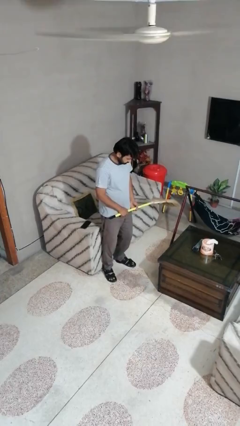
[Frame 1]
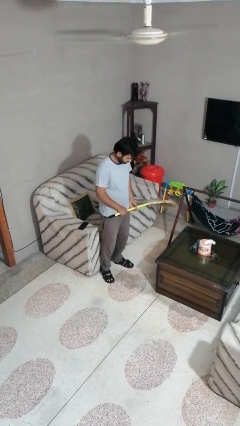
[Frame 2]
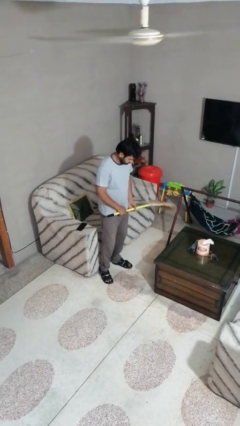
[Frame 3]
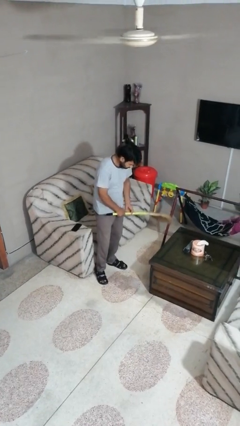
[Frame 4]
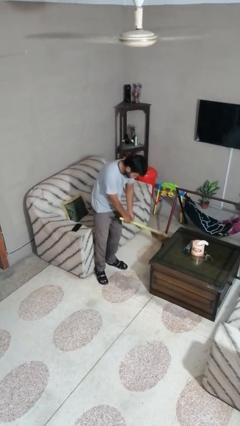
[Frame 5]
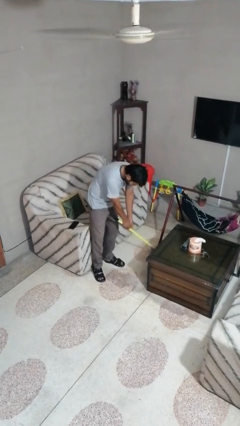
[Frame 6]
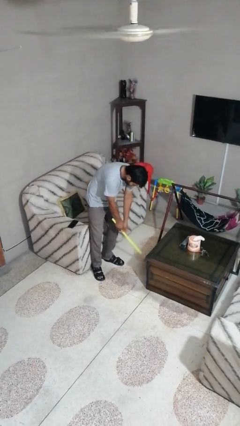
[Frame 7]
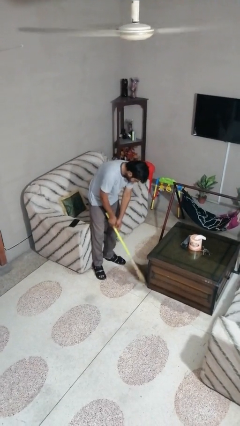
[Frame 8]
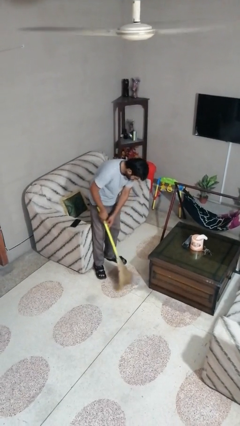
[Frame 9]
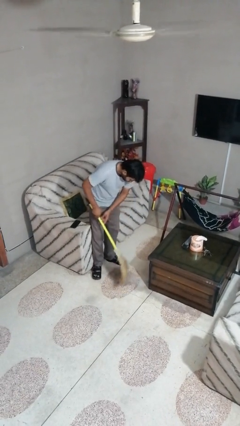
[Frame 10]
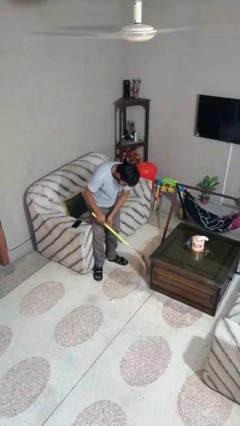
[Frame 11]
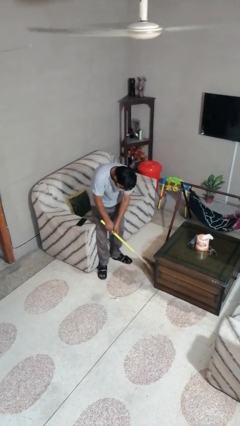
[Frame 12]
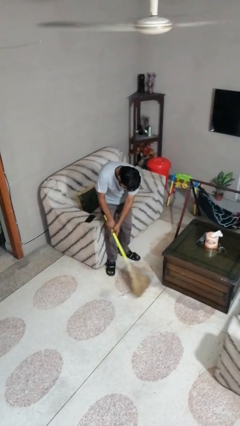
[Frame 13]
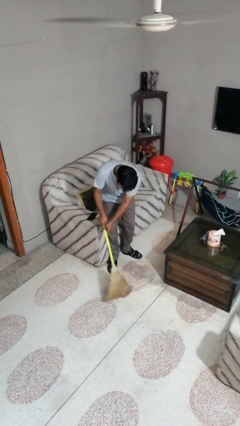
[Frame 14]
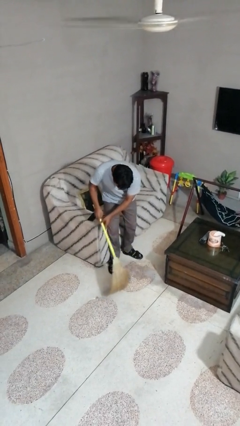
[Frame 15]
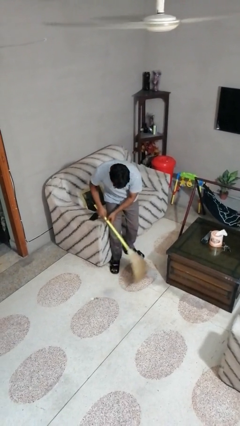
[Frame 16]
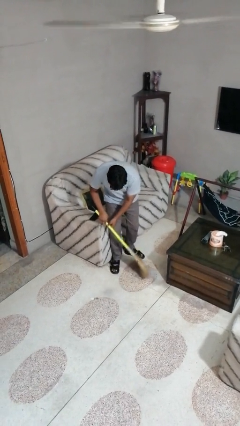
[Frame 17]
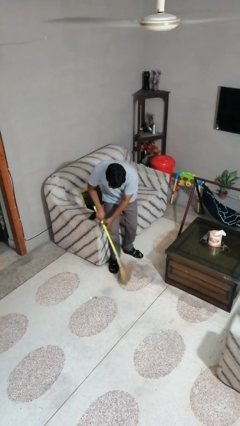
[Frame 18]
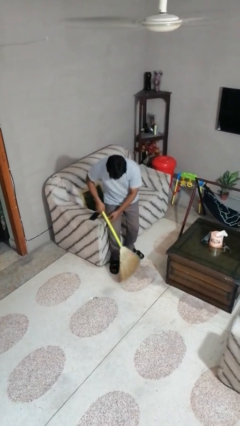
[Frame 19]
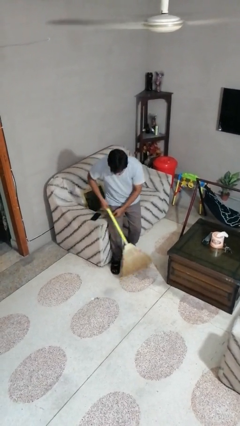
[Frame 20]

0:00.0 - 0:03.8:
person sweeps floor

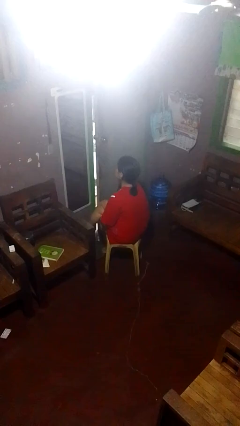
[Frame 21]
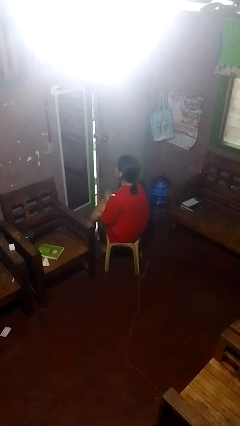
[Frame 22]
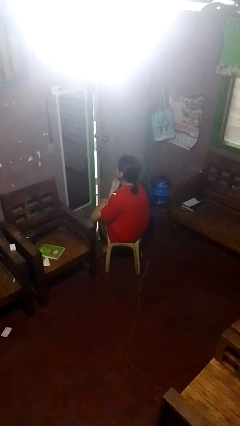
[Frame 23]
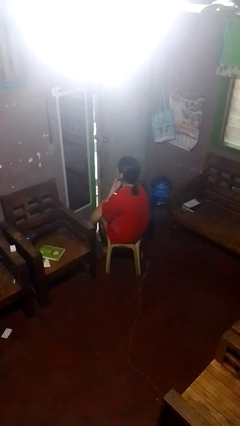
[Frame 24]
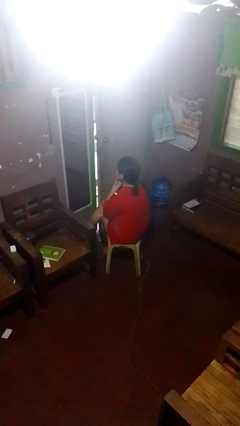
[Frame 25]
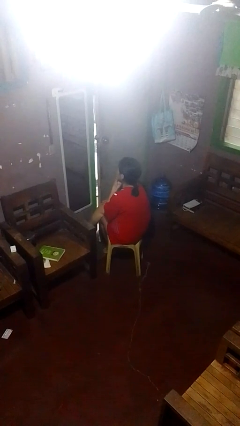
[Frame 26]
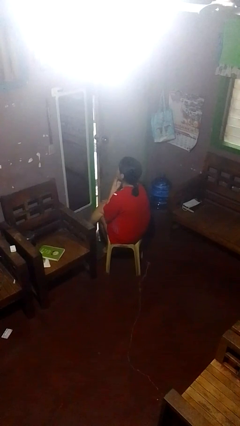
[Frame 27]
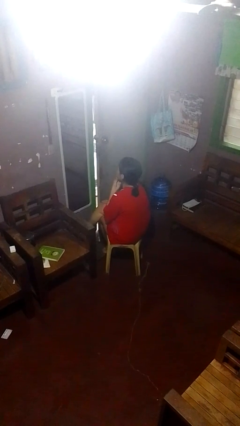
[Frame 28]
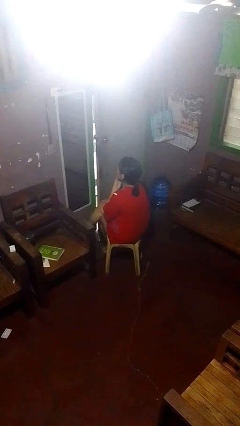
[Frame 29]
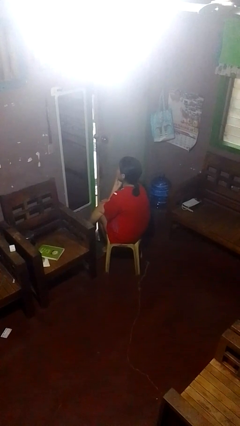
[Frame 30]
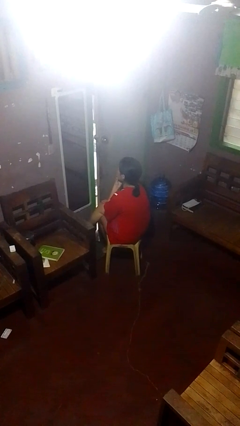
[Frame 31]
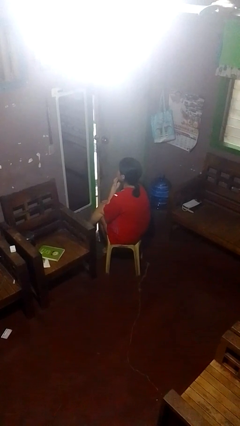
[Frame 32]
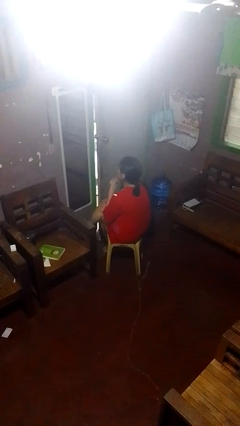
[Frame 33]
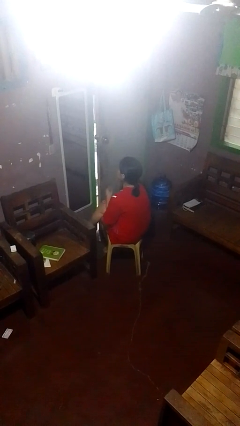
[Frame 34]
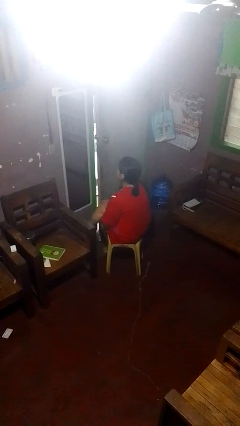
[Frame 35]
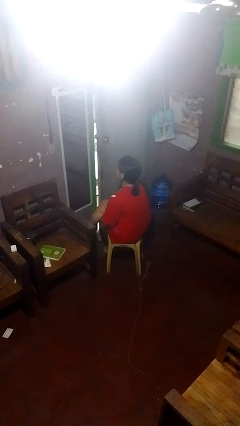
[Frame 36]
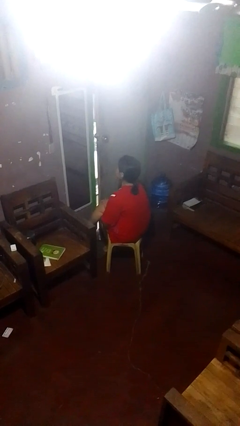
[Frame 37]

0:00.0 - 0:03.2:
person strokes chin

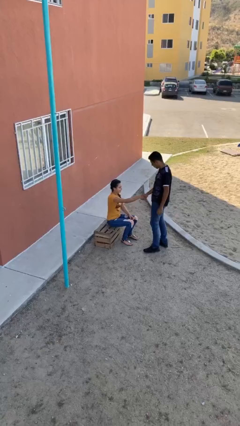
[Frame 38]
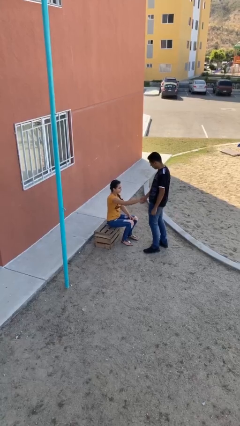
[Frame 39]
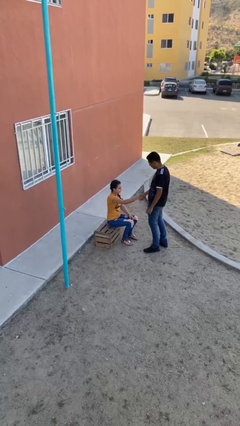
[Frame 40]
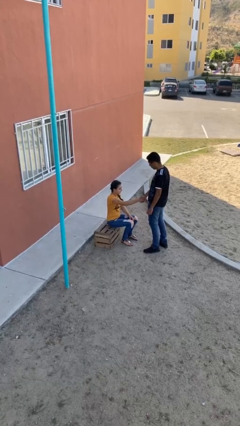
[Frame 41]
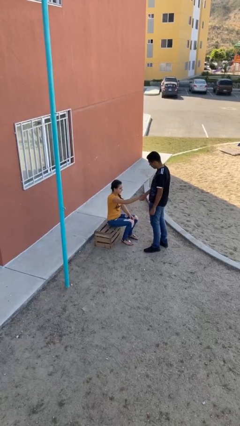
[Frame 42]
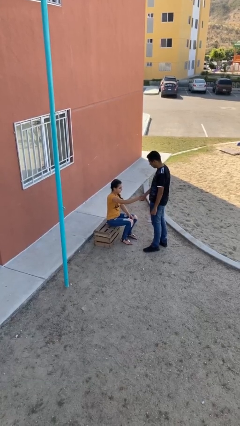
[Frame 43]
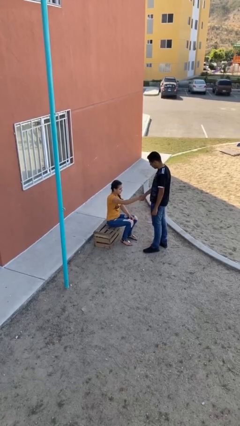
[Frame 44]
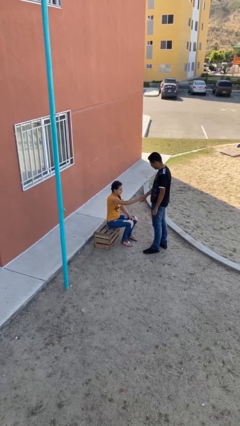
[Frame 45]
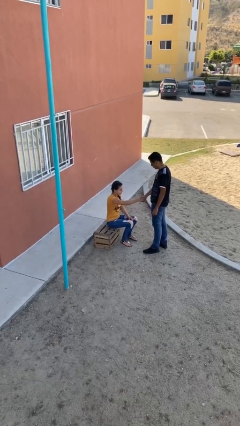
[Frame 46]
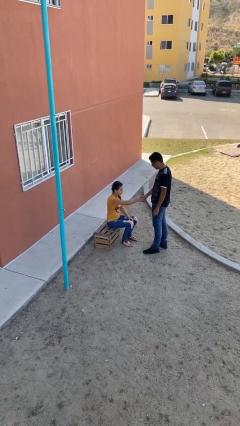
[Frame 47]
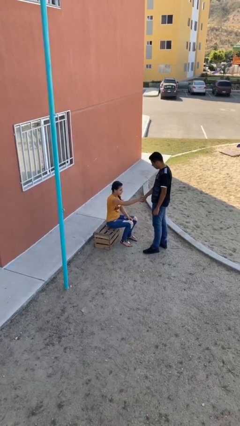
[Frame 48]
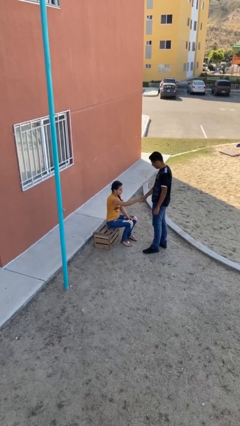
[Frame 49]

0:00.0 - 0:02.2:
person shakes hand

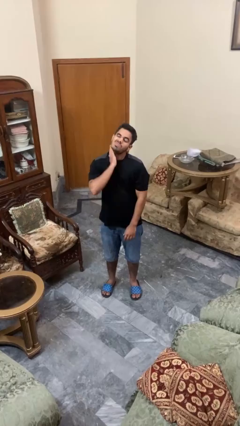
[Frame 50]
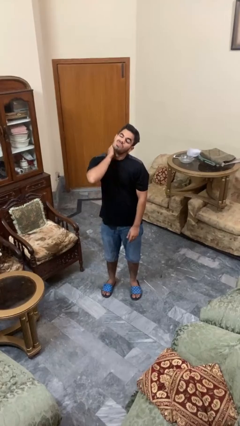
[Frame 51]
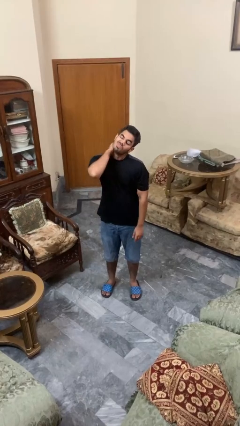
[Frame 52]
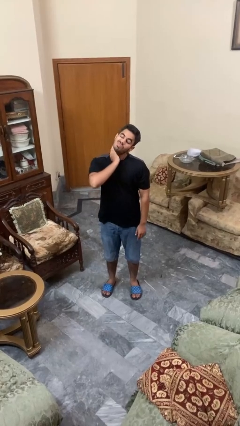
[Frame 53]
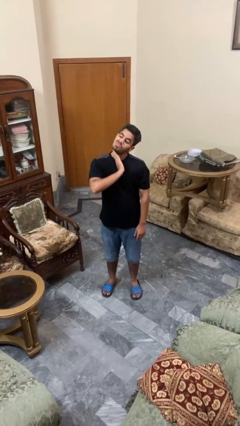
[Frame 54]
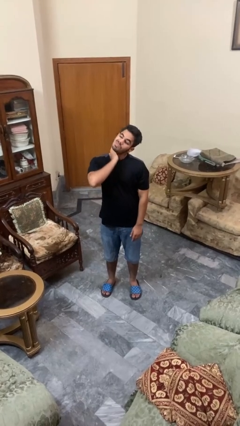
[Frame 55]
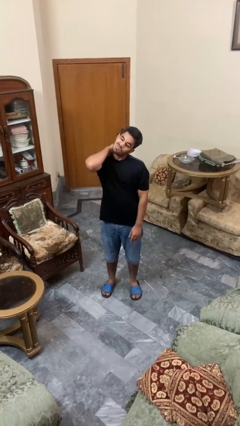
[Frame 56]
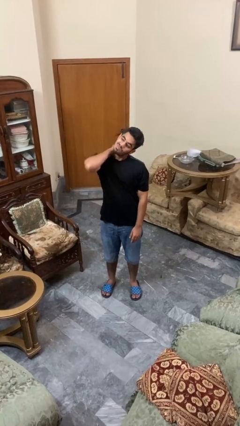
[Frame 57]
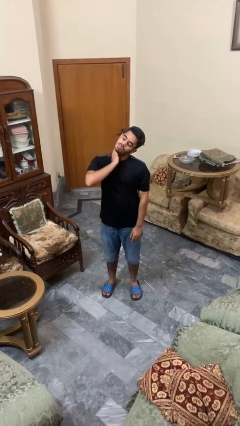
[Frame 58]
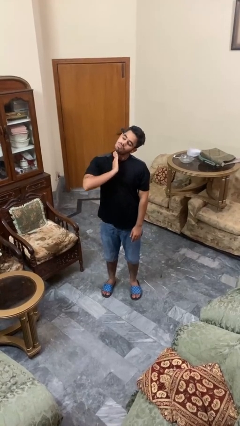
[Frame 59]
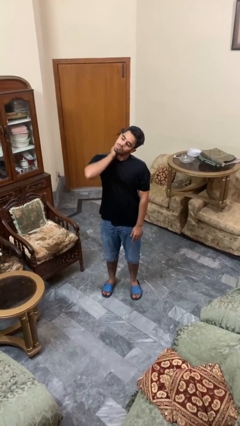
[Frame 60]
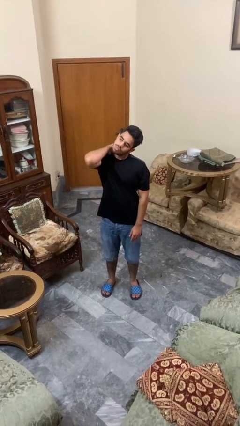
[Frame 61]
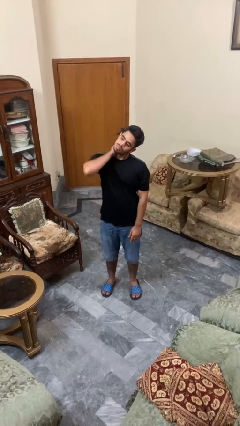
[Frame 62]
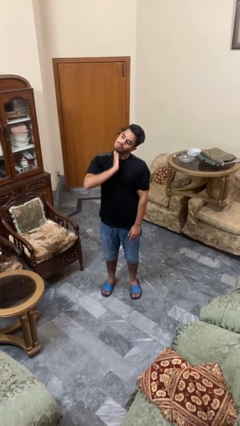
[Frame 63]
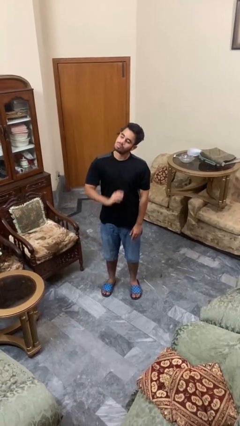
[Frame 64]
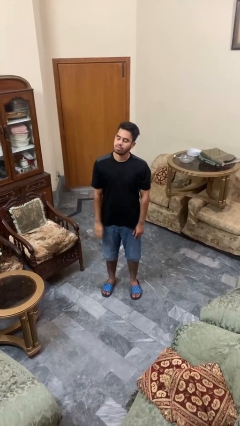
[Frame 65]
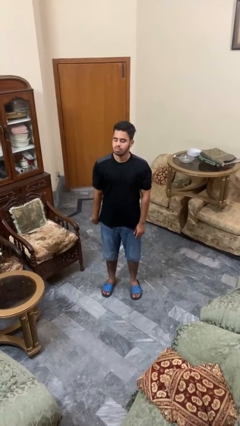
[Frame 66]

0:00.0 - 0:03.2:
person rubs neck

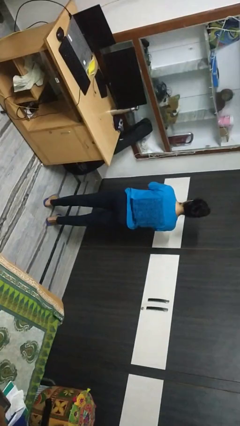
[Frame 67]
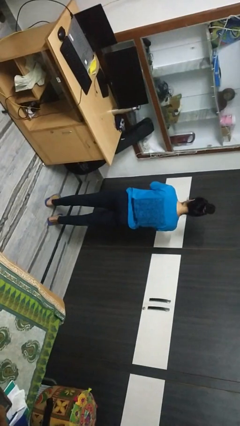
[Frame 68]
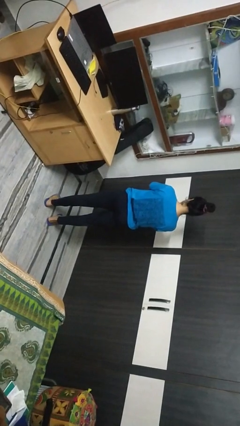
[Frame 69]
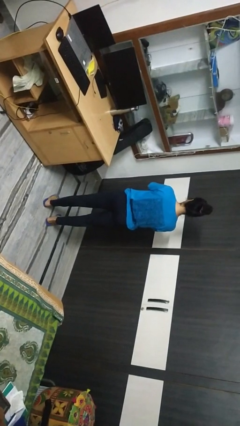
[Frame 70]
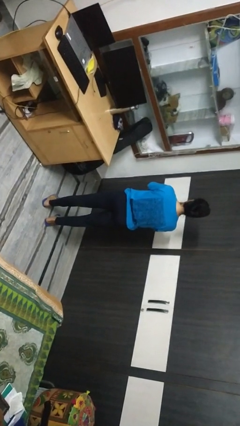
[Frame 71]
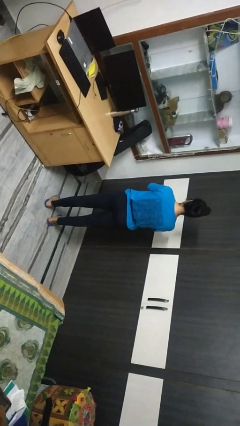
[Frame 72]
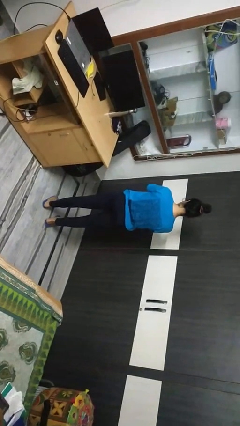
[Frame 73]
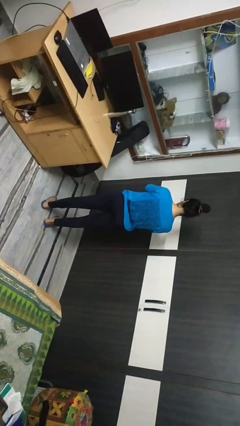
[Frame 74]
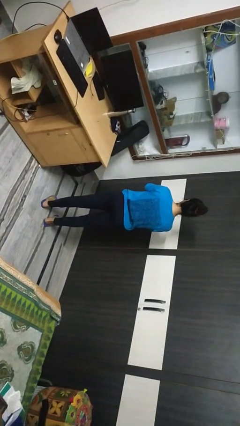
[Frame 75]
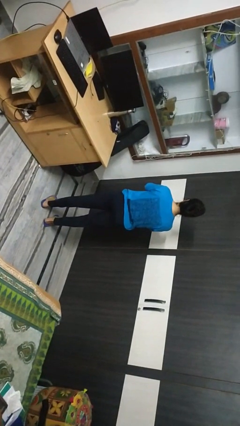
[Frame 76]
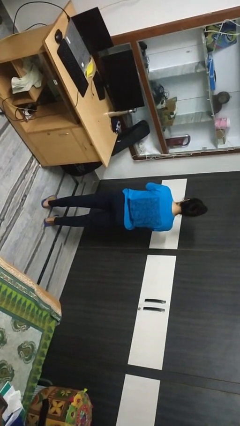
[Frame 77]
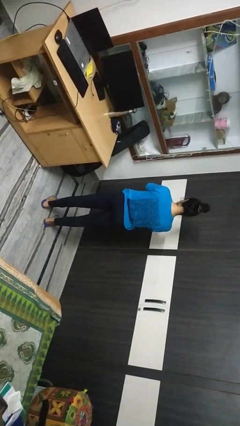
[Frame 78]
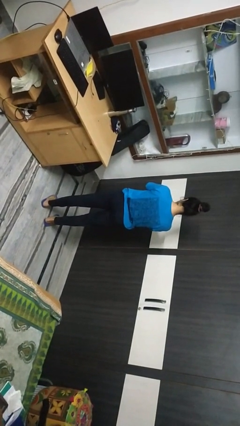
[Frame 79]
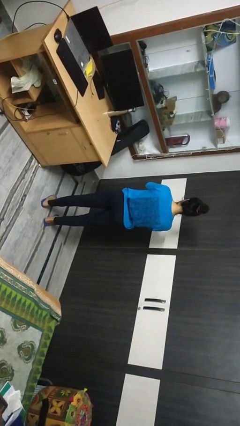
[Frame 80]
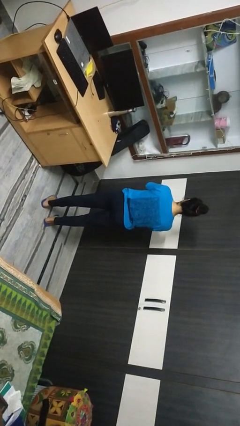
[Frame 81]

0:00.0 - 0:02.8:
person nods head

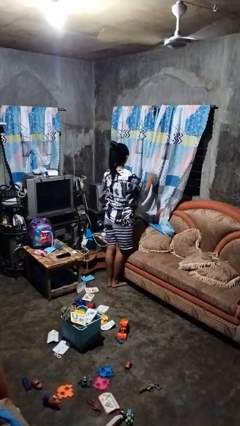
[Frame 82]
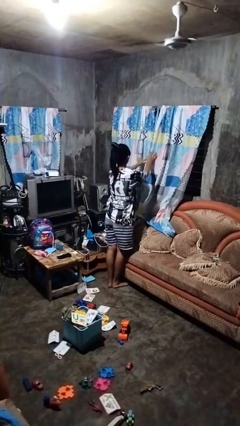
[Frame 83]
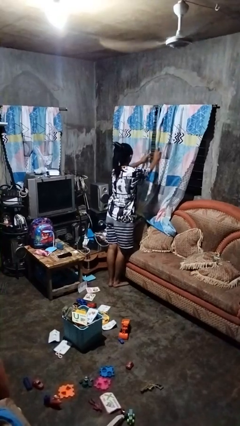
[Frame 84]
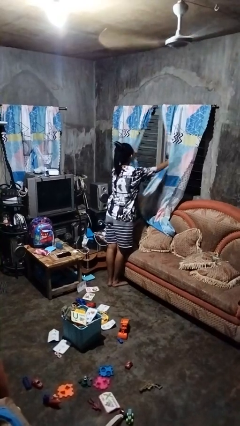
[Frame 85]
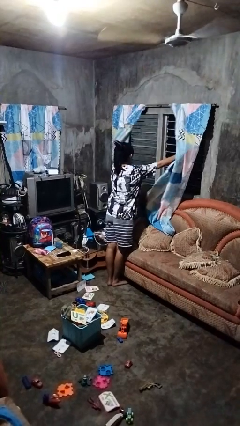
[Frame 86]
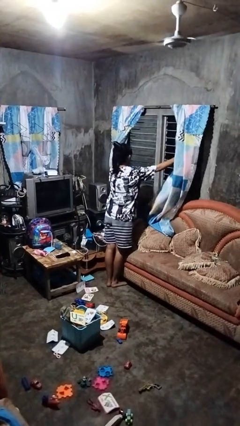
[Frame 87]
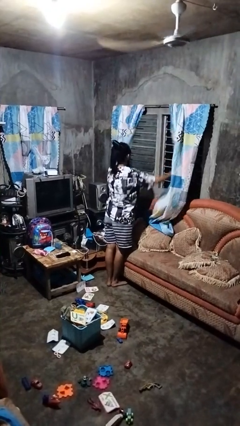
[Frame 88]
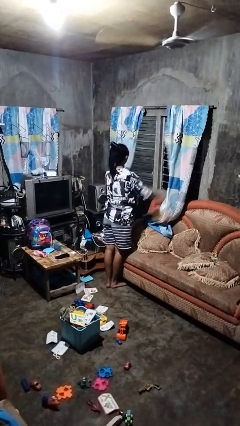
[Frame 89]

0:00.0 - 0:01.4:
person opens curtains

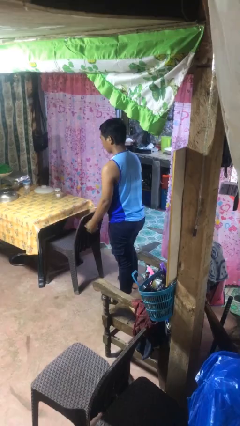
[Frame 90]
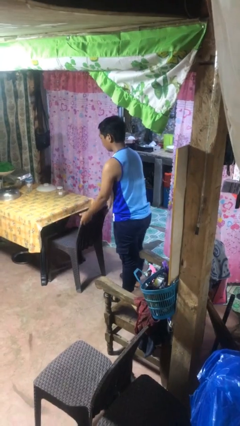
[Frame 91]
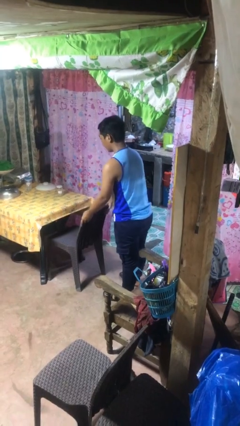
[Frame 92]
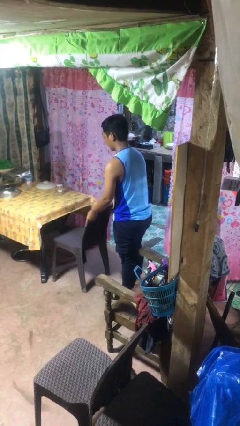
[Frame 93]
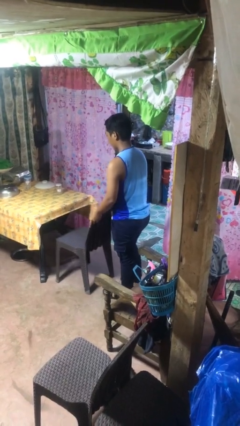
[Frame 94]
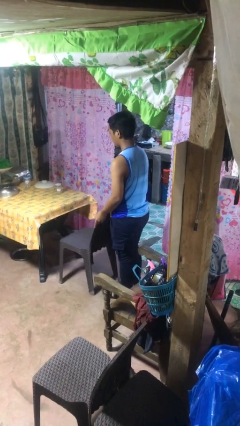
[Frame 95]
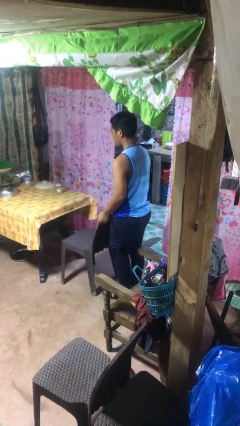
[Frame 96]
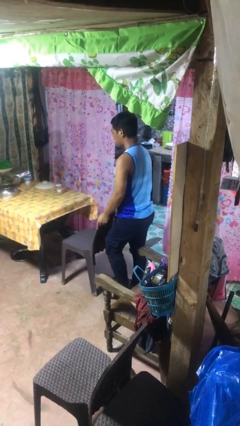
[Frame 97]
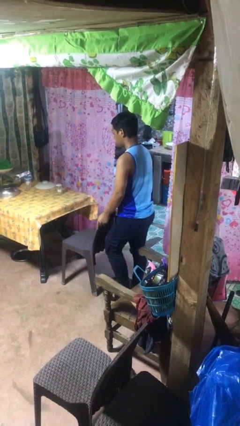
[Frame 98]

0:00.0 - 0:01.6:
person pulls out chair
